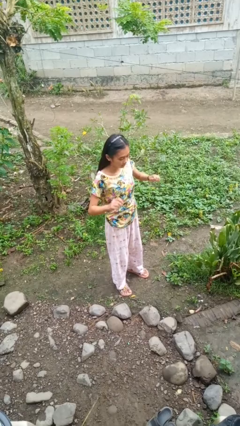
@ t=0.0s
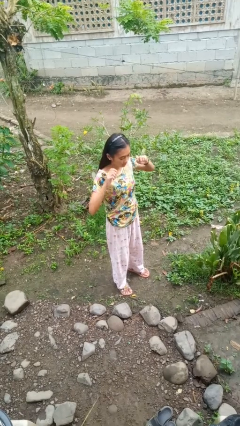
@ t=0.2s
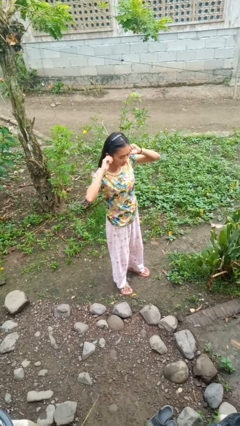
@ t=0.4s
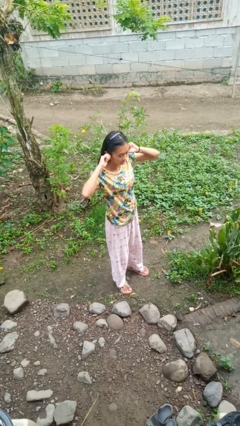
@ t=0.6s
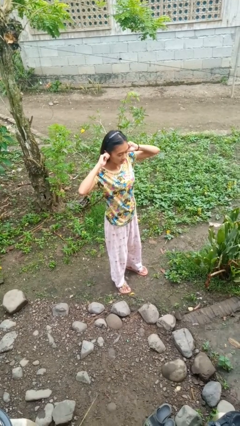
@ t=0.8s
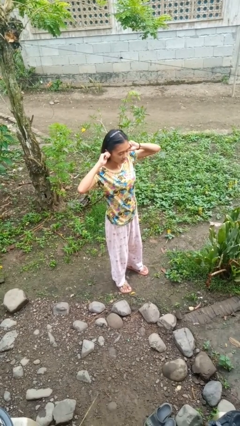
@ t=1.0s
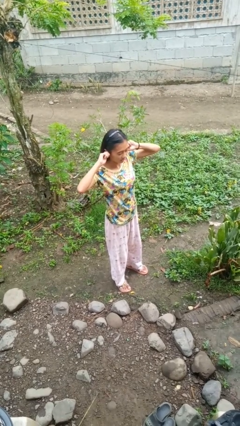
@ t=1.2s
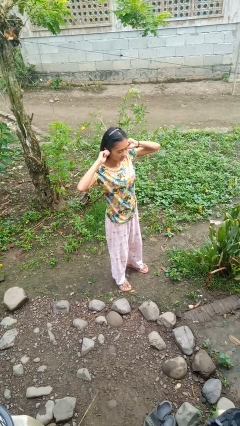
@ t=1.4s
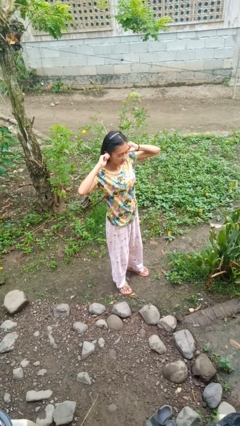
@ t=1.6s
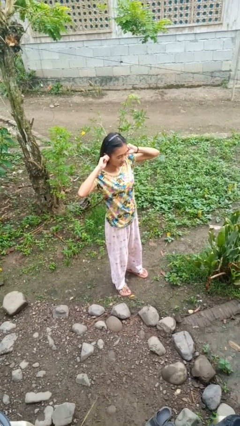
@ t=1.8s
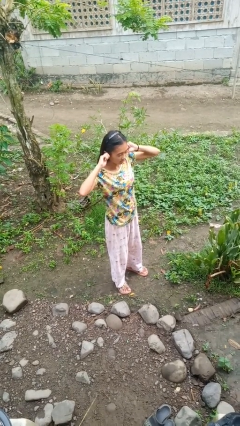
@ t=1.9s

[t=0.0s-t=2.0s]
person puts fingers in ear

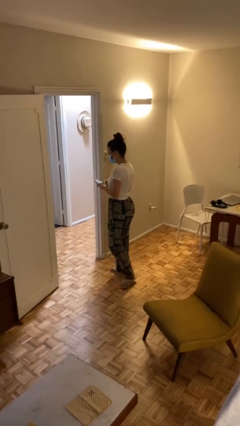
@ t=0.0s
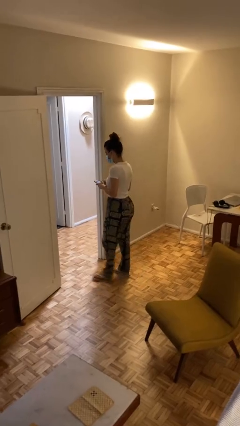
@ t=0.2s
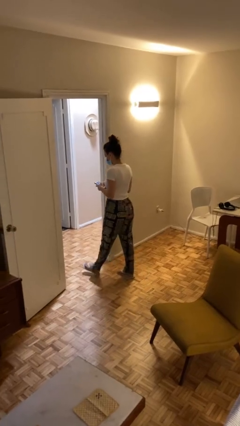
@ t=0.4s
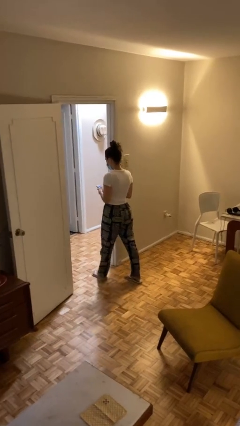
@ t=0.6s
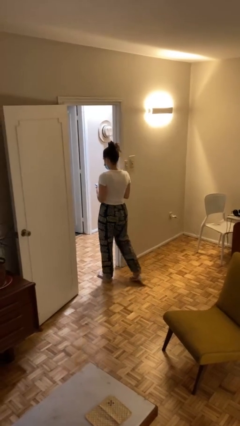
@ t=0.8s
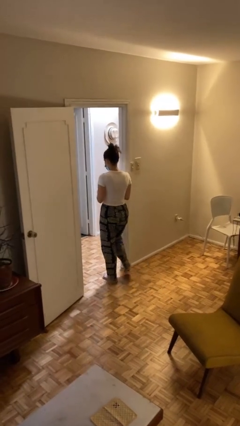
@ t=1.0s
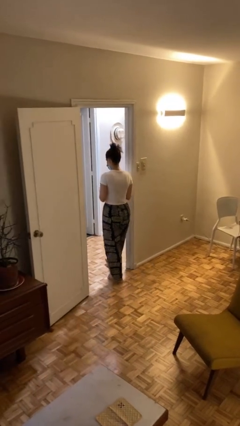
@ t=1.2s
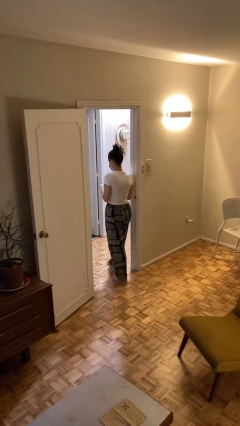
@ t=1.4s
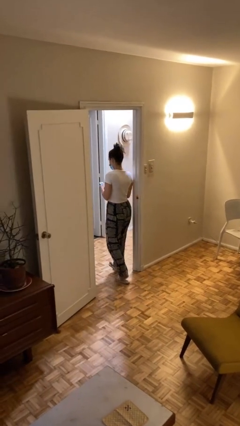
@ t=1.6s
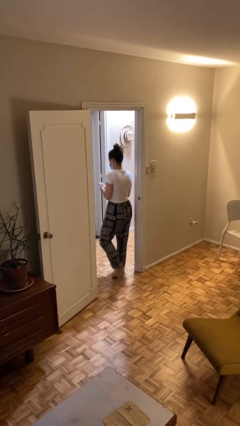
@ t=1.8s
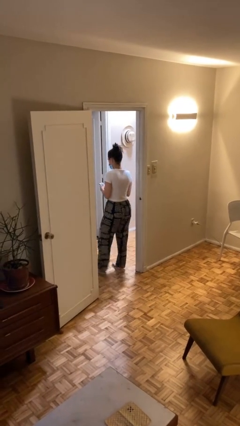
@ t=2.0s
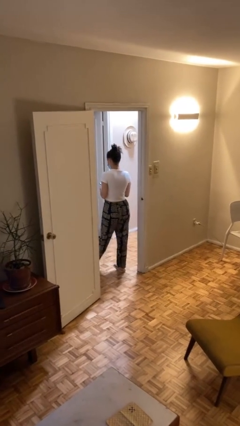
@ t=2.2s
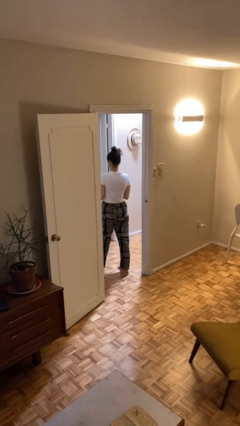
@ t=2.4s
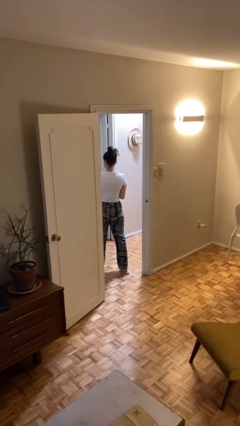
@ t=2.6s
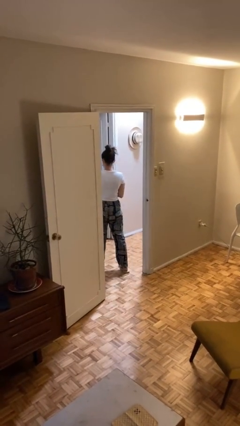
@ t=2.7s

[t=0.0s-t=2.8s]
person exits scene through structure

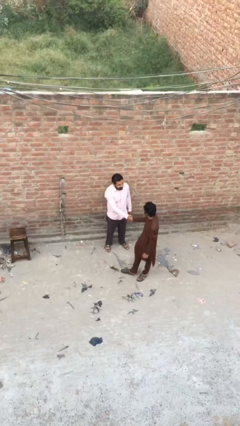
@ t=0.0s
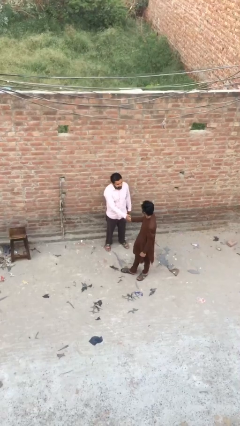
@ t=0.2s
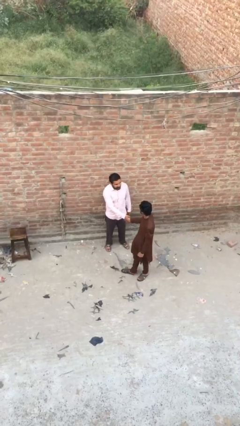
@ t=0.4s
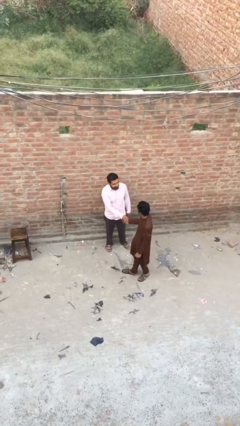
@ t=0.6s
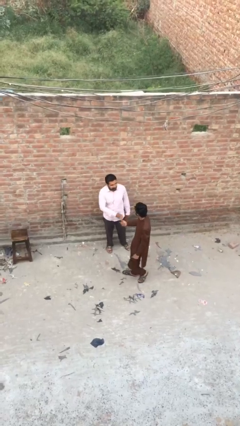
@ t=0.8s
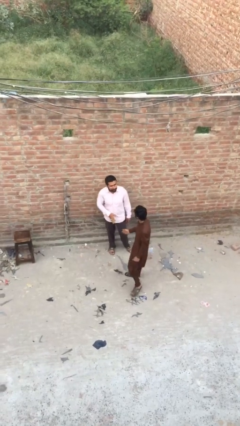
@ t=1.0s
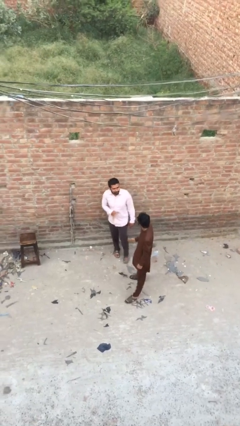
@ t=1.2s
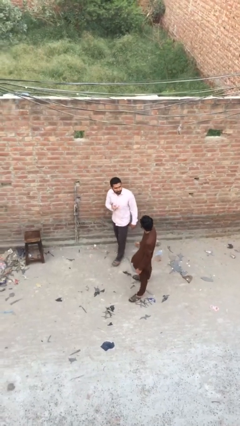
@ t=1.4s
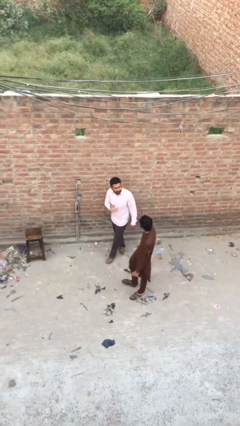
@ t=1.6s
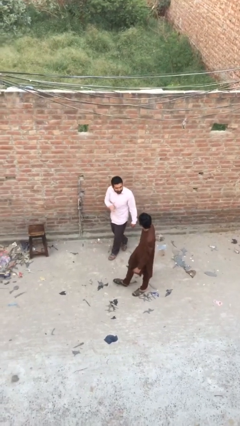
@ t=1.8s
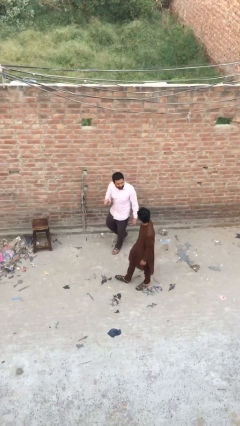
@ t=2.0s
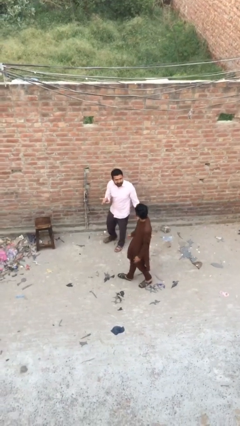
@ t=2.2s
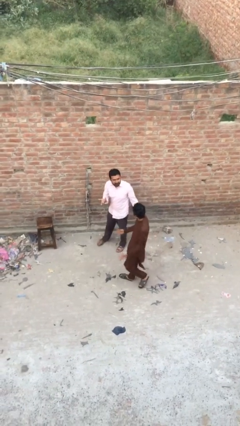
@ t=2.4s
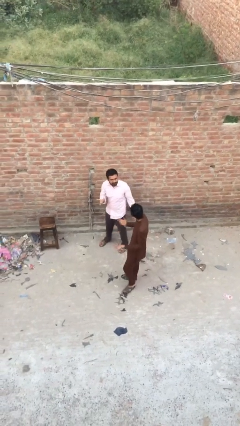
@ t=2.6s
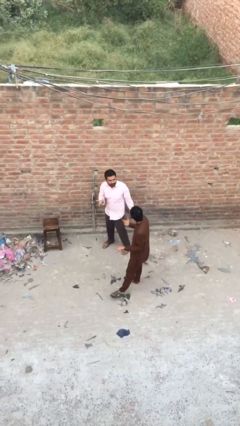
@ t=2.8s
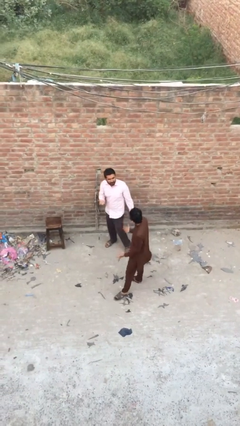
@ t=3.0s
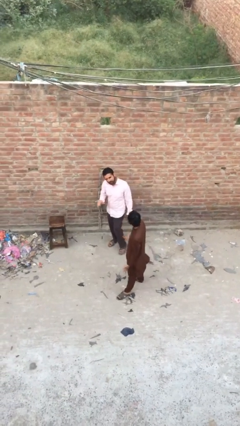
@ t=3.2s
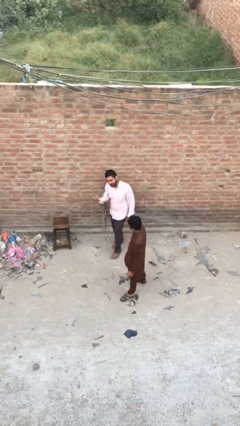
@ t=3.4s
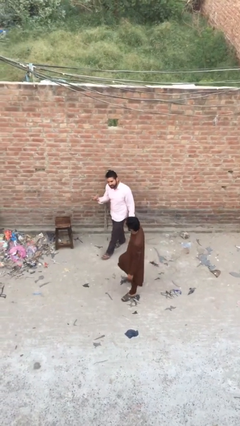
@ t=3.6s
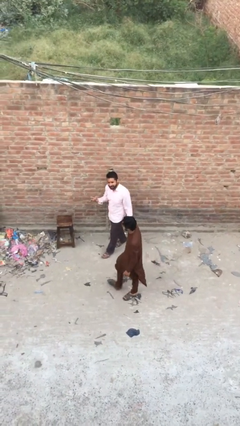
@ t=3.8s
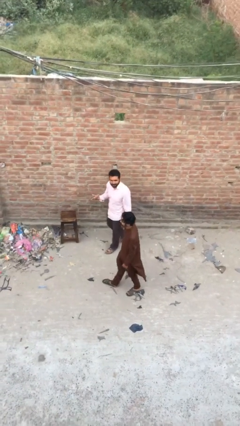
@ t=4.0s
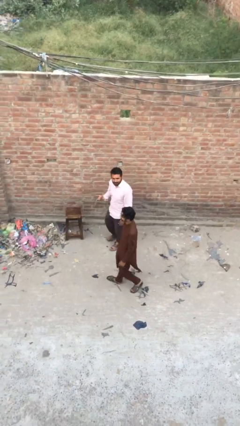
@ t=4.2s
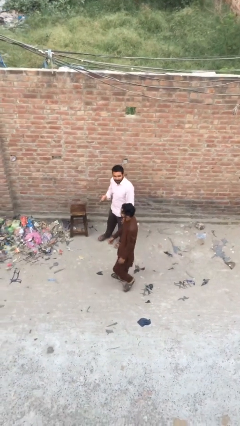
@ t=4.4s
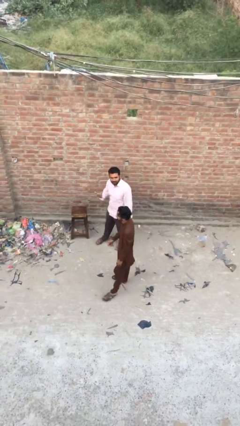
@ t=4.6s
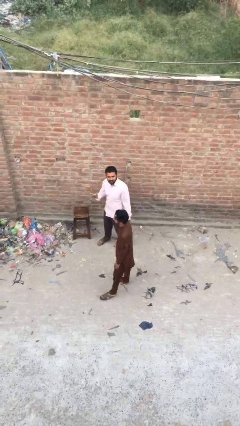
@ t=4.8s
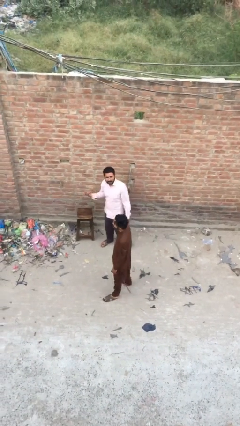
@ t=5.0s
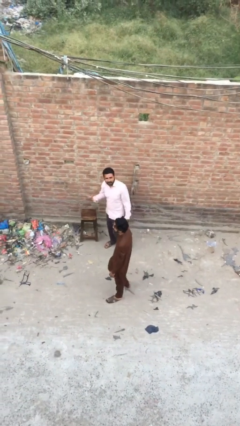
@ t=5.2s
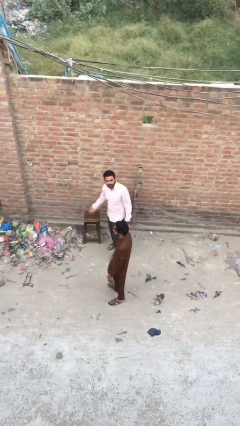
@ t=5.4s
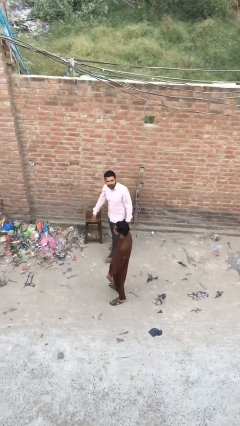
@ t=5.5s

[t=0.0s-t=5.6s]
person talks to person

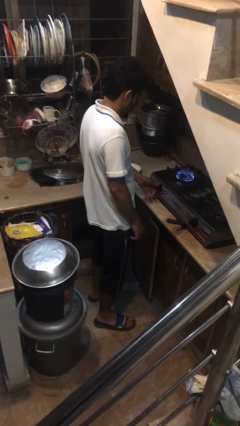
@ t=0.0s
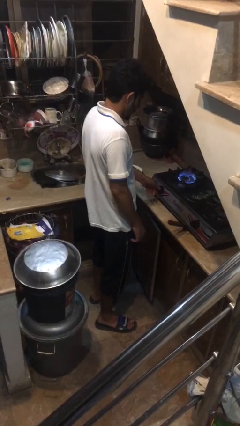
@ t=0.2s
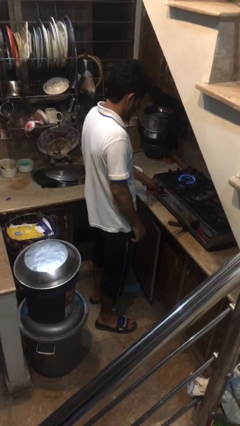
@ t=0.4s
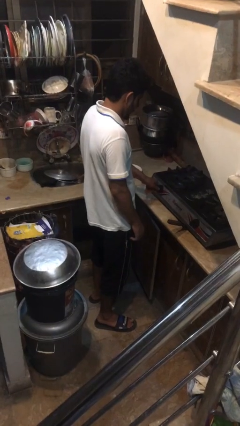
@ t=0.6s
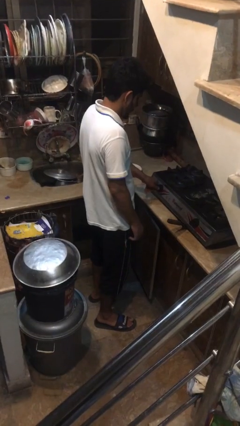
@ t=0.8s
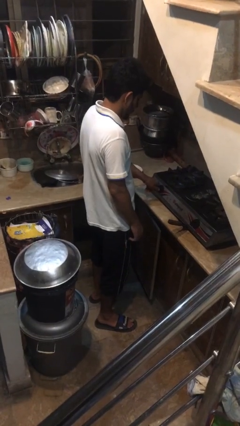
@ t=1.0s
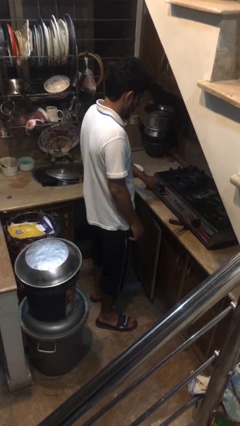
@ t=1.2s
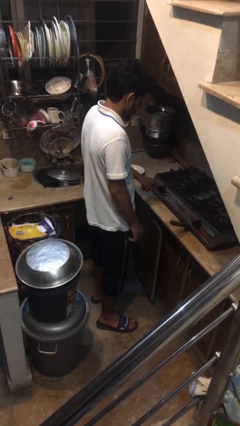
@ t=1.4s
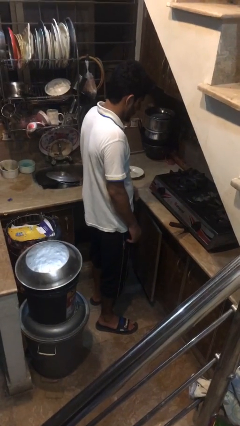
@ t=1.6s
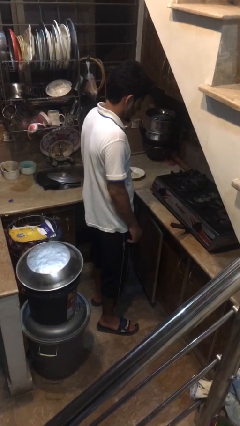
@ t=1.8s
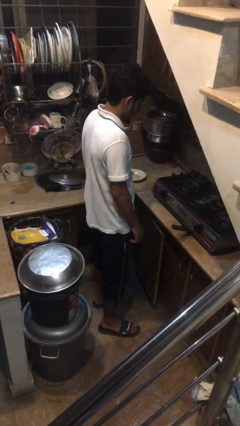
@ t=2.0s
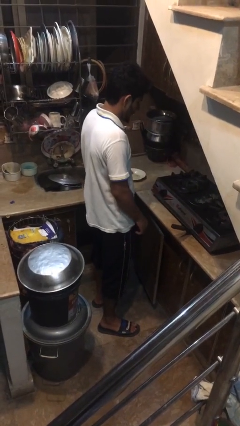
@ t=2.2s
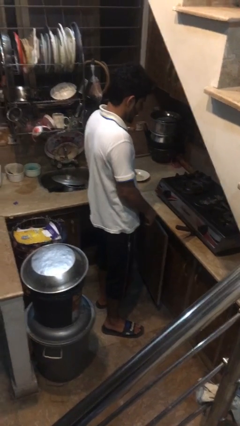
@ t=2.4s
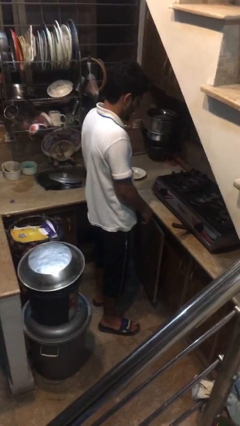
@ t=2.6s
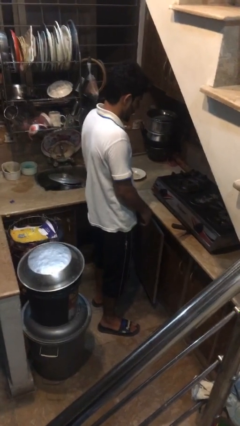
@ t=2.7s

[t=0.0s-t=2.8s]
person turns off stovetop

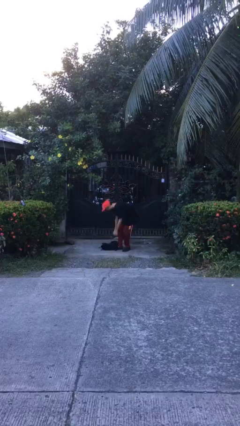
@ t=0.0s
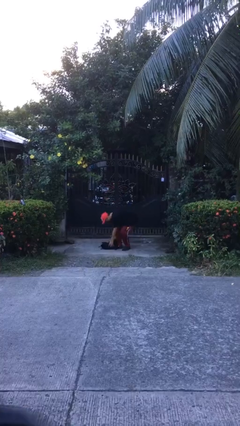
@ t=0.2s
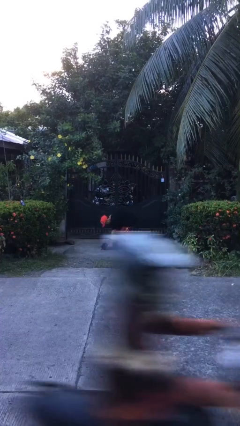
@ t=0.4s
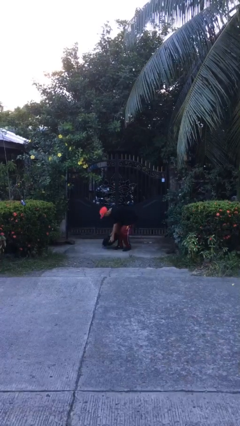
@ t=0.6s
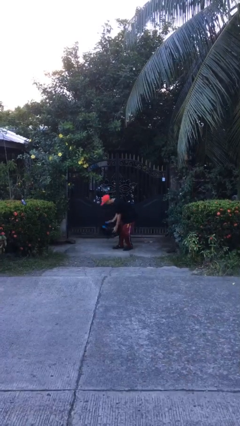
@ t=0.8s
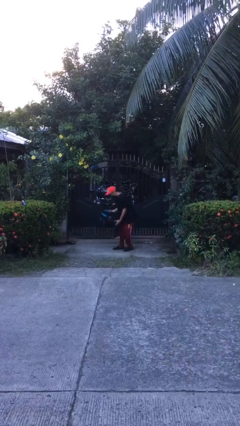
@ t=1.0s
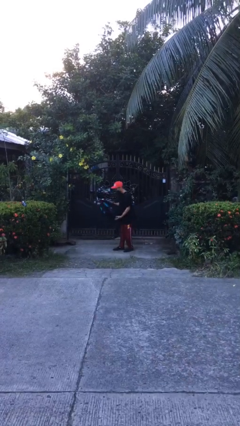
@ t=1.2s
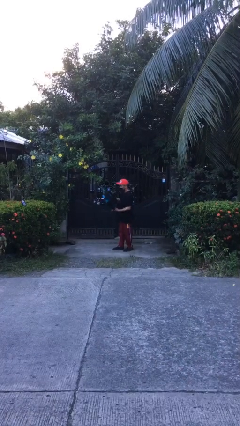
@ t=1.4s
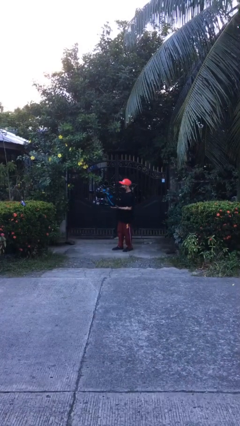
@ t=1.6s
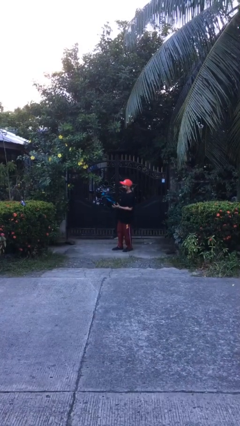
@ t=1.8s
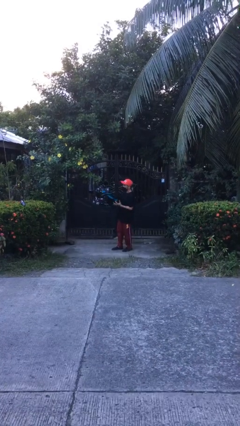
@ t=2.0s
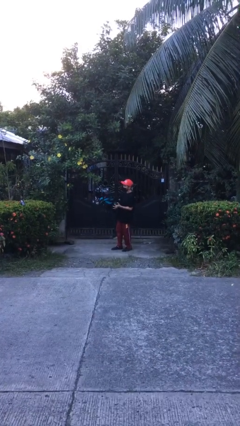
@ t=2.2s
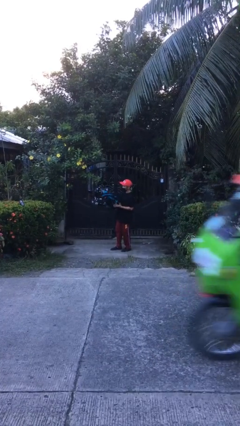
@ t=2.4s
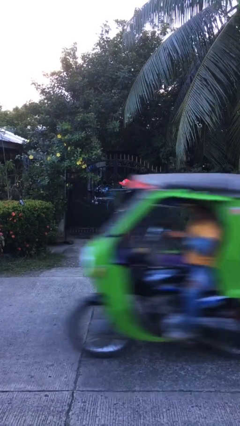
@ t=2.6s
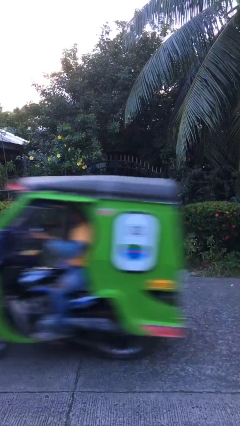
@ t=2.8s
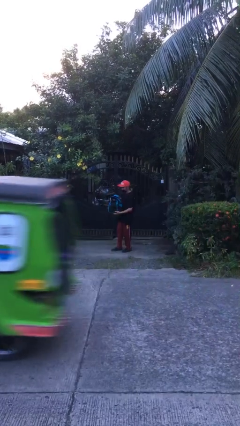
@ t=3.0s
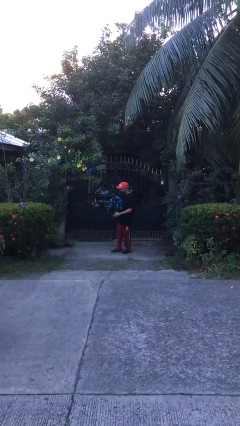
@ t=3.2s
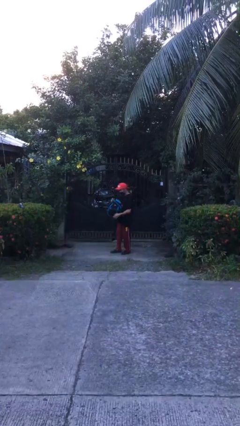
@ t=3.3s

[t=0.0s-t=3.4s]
person picks up object from floor

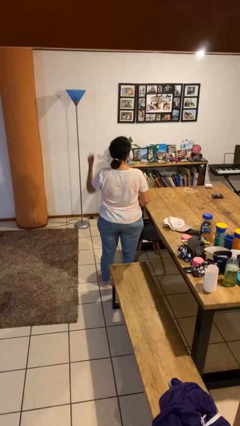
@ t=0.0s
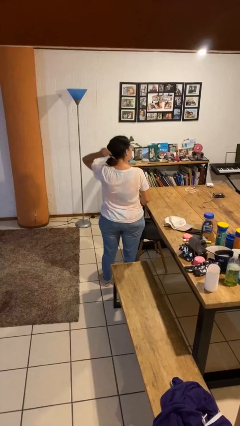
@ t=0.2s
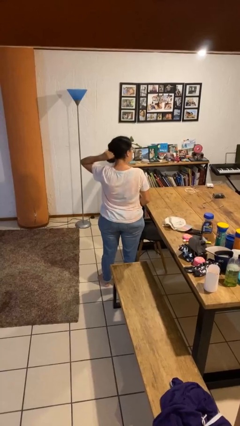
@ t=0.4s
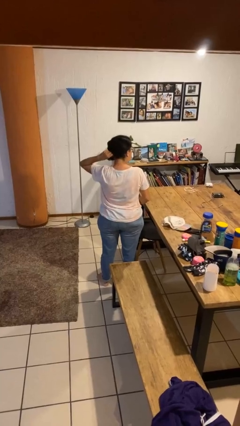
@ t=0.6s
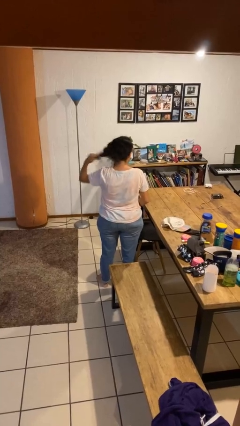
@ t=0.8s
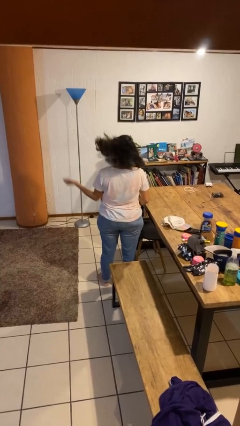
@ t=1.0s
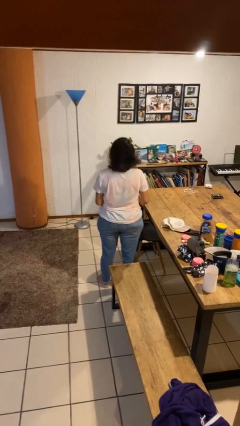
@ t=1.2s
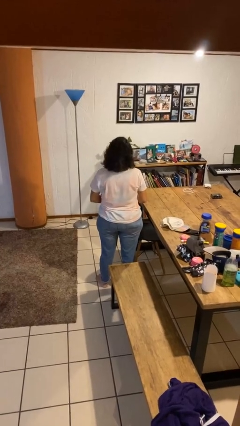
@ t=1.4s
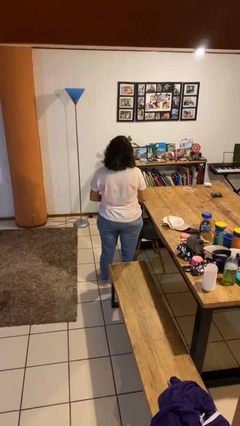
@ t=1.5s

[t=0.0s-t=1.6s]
person takes off hairtie
